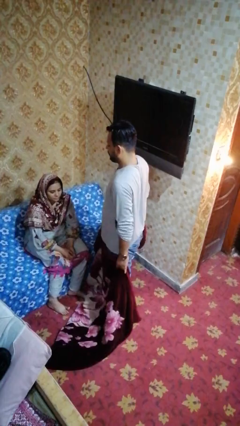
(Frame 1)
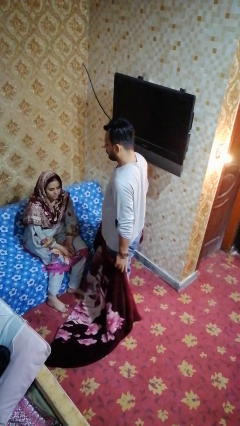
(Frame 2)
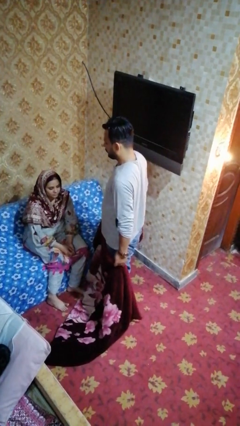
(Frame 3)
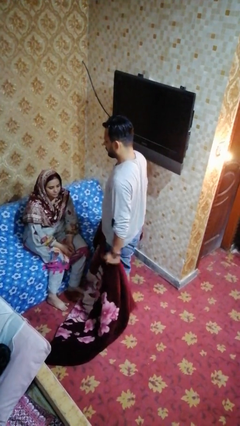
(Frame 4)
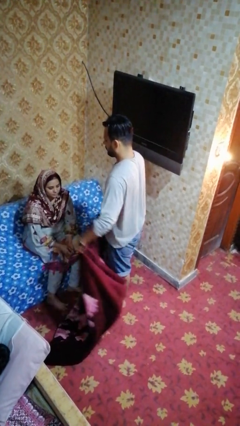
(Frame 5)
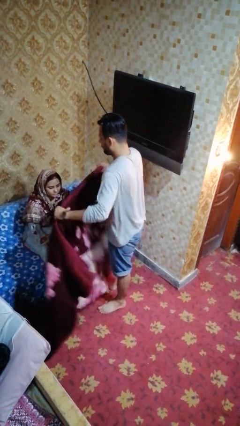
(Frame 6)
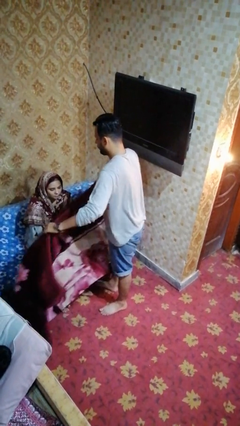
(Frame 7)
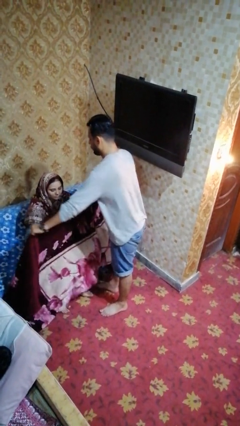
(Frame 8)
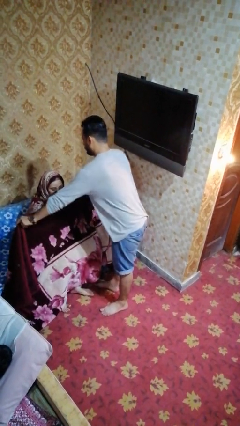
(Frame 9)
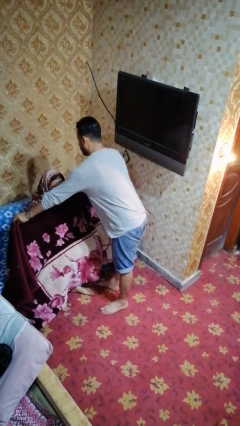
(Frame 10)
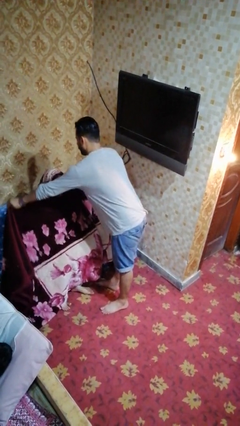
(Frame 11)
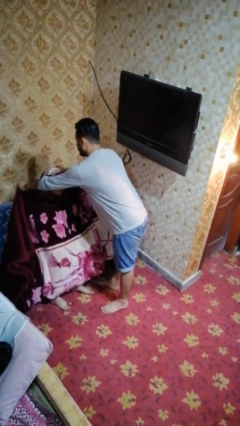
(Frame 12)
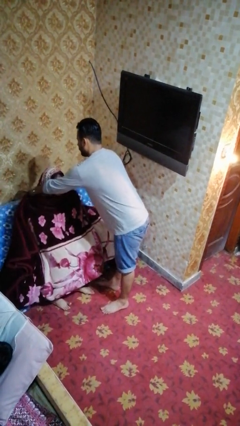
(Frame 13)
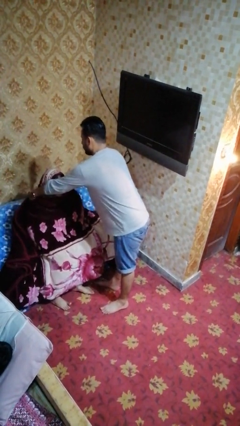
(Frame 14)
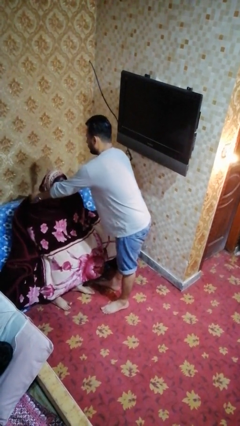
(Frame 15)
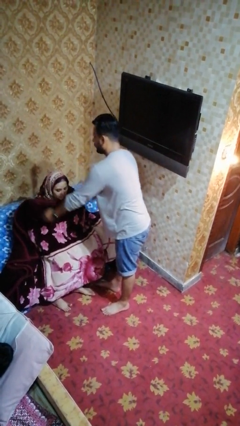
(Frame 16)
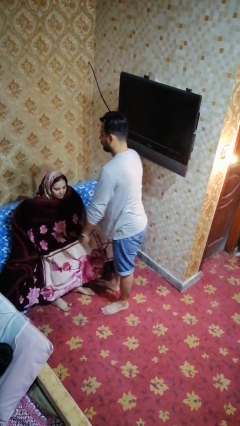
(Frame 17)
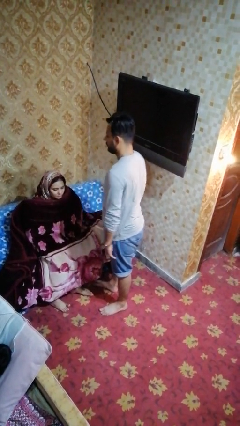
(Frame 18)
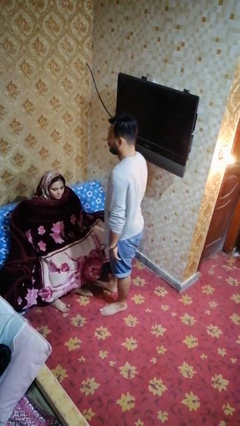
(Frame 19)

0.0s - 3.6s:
person covers friend with blanket

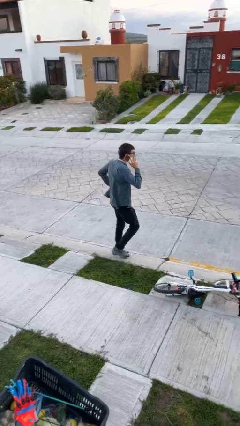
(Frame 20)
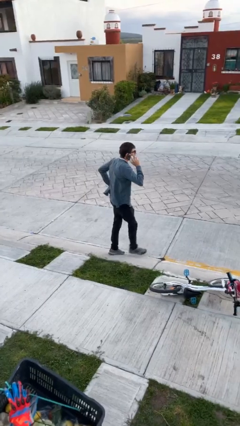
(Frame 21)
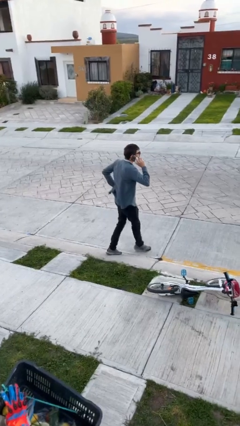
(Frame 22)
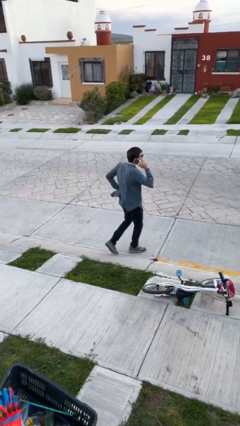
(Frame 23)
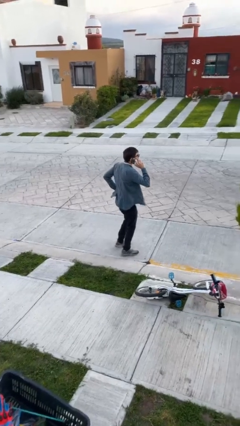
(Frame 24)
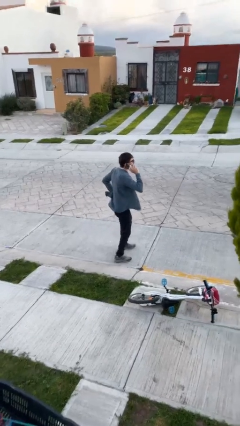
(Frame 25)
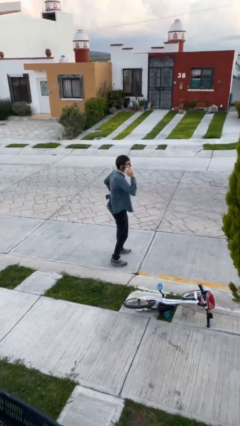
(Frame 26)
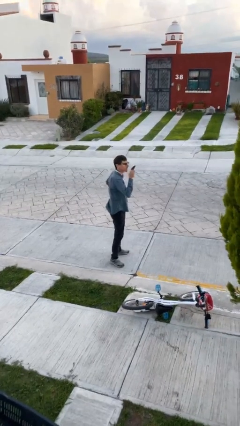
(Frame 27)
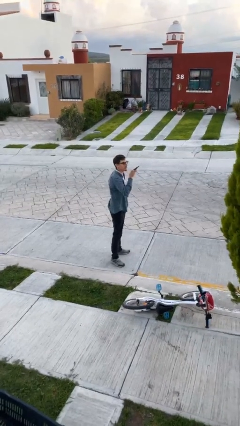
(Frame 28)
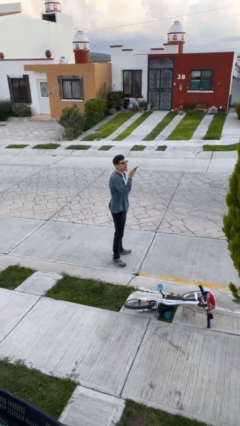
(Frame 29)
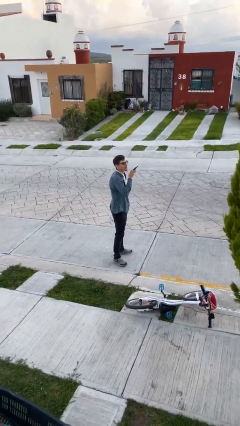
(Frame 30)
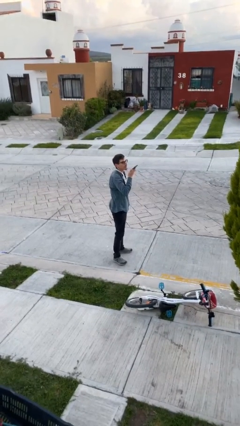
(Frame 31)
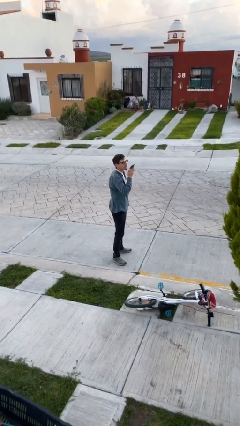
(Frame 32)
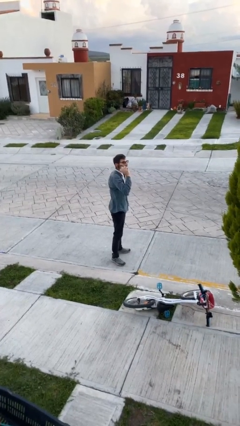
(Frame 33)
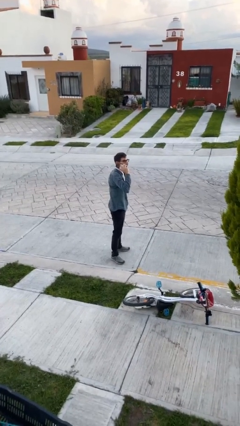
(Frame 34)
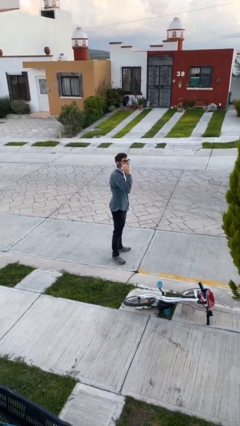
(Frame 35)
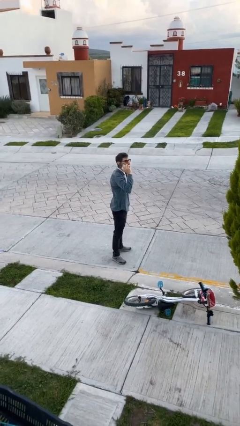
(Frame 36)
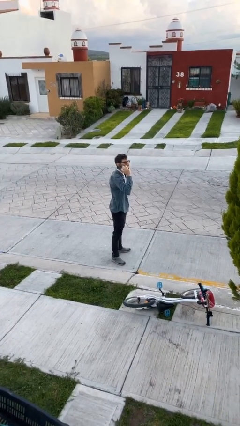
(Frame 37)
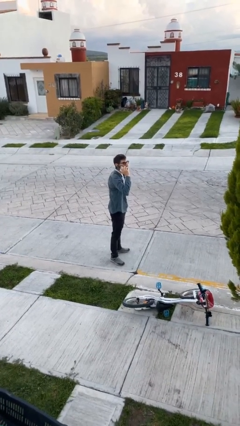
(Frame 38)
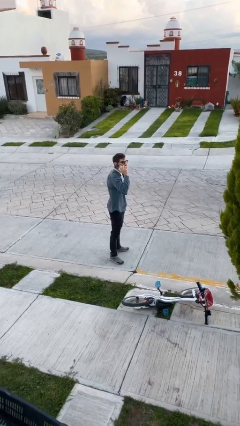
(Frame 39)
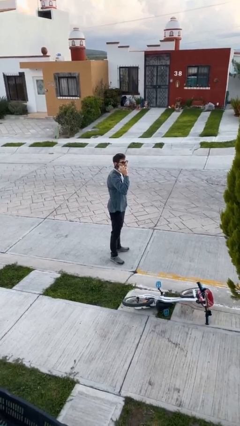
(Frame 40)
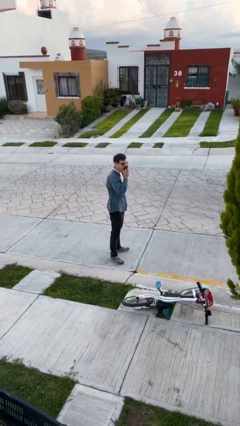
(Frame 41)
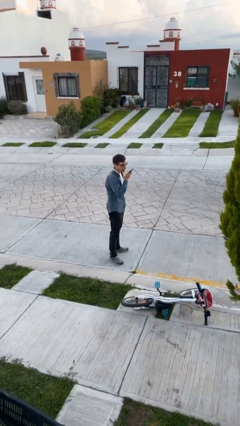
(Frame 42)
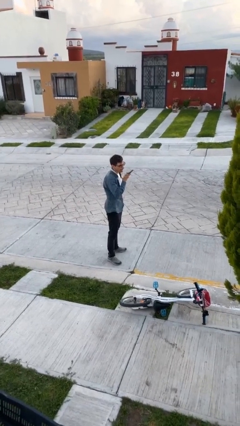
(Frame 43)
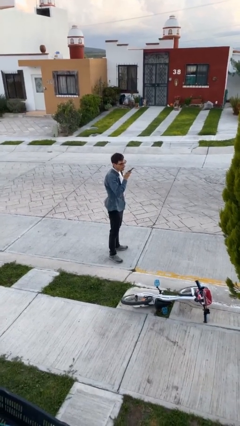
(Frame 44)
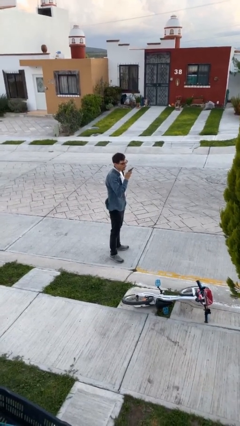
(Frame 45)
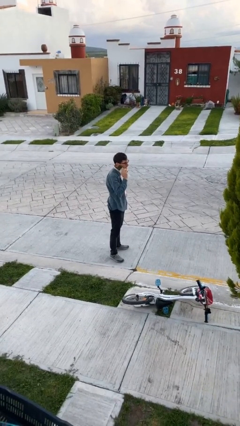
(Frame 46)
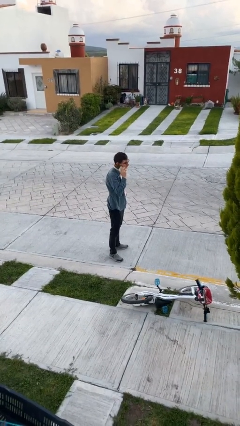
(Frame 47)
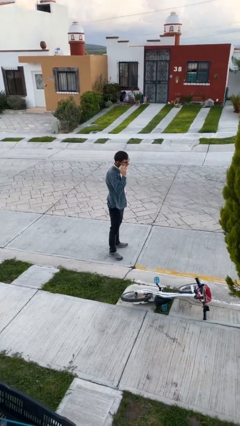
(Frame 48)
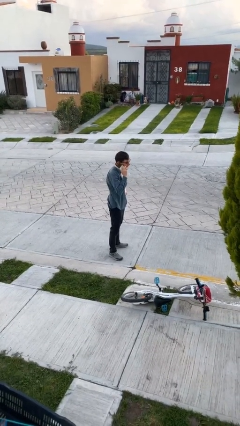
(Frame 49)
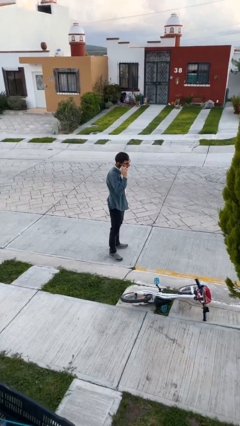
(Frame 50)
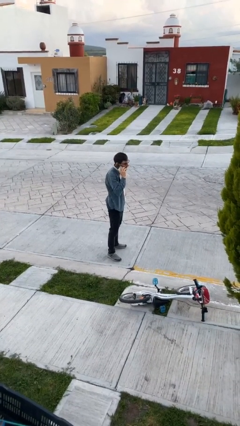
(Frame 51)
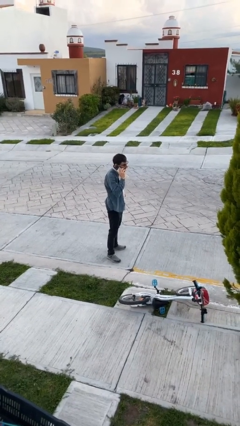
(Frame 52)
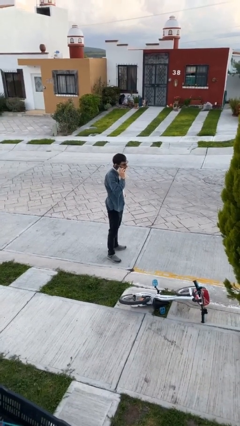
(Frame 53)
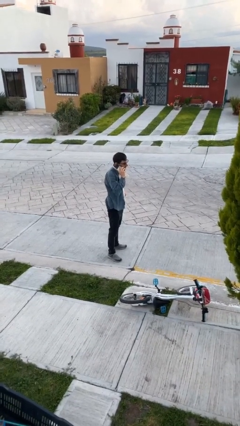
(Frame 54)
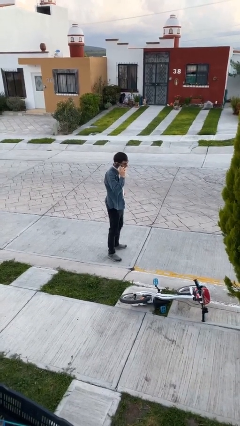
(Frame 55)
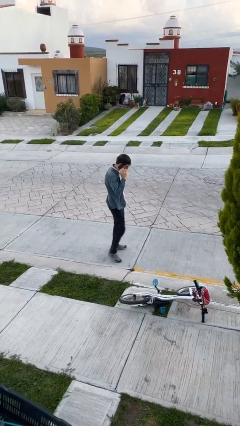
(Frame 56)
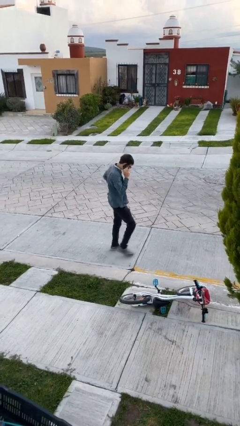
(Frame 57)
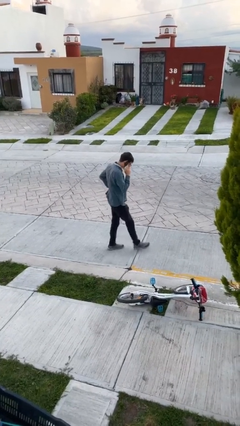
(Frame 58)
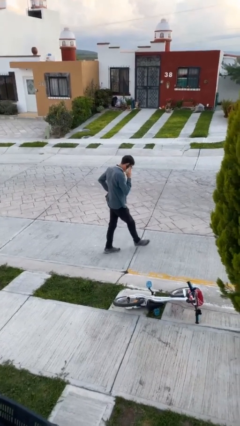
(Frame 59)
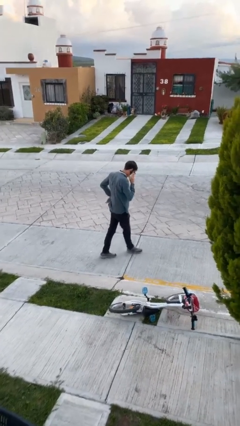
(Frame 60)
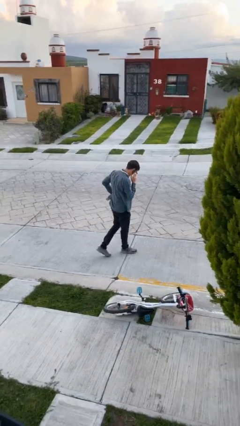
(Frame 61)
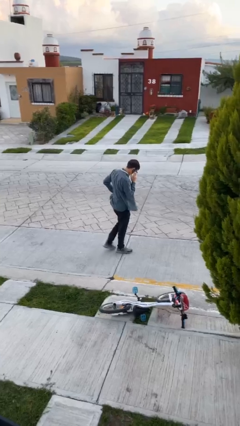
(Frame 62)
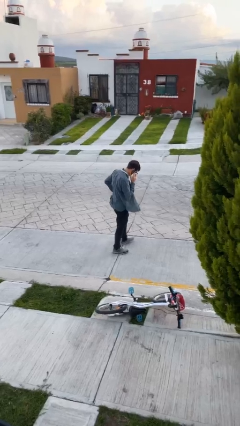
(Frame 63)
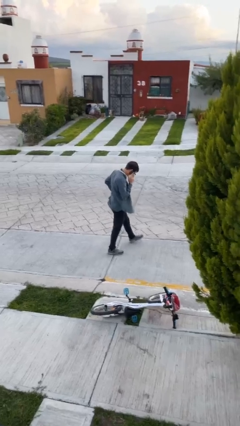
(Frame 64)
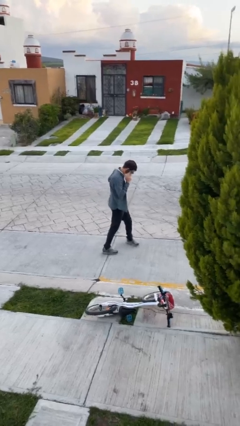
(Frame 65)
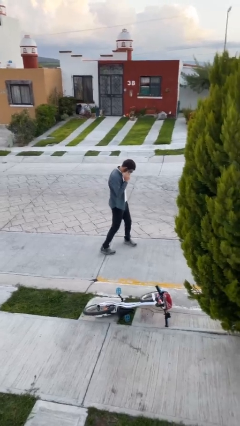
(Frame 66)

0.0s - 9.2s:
person talks on phone

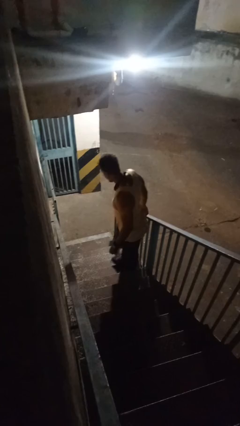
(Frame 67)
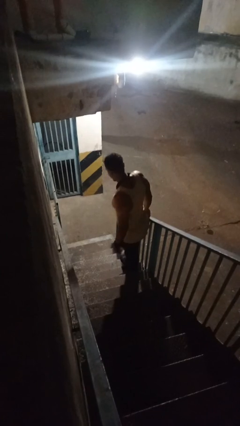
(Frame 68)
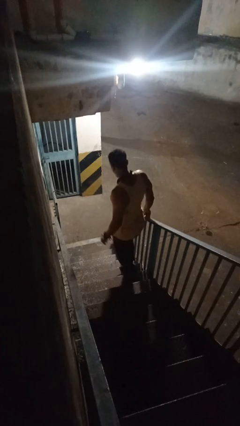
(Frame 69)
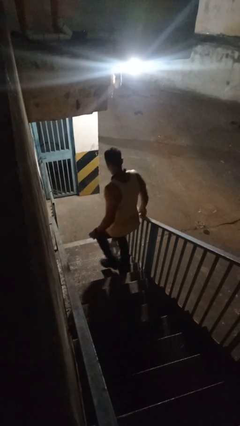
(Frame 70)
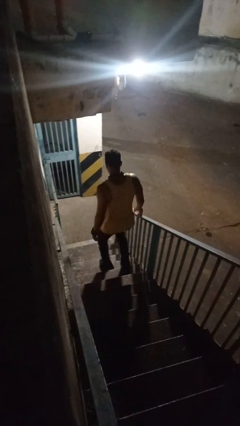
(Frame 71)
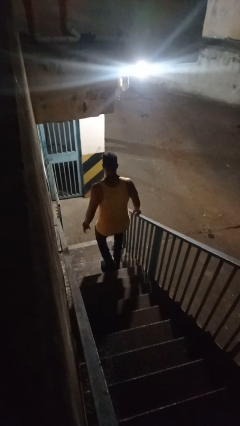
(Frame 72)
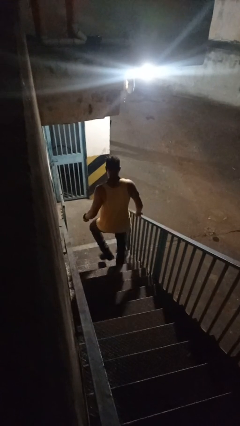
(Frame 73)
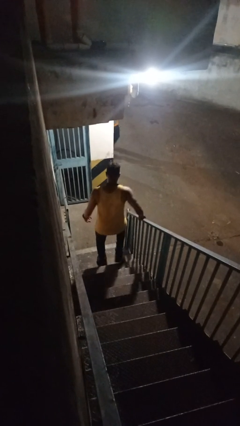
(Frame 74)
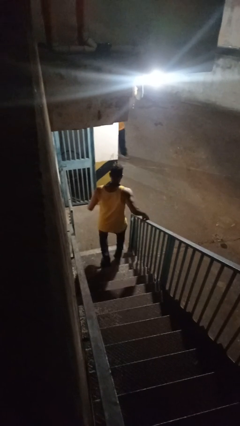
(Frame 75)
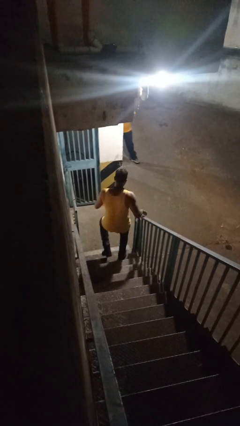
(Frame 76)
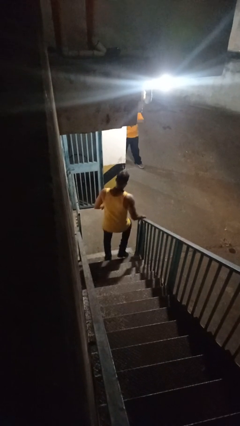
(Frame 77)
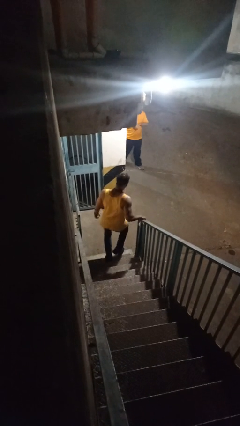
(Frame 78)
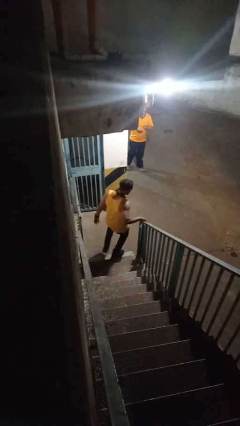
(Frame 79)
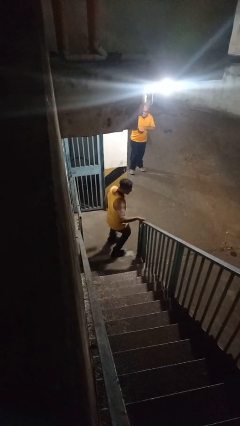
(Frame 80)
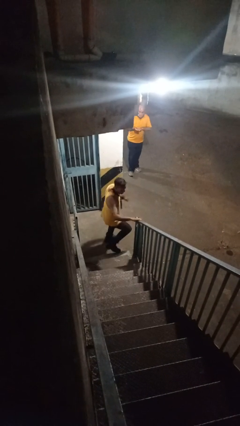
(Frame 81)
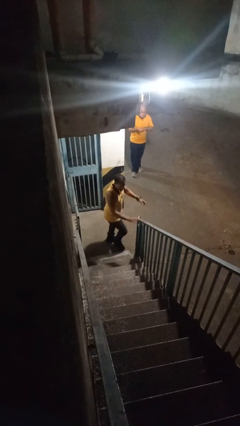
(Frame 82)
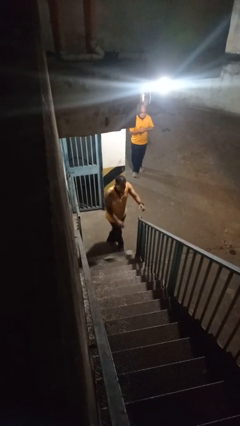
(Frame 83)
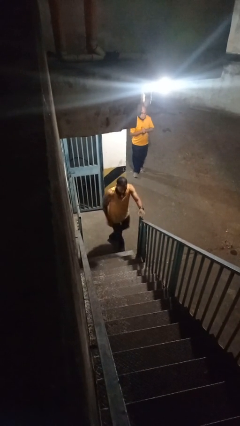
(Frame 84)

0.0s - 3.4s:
person climbs down stairs

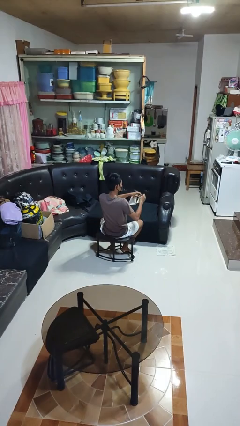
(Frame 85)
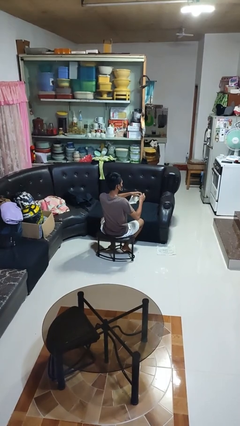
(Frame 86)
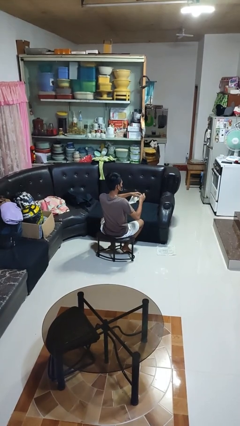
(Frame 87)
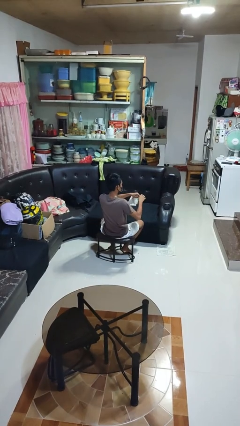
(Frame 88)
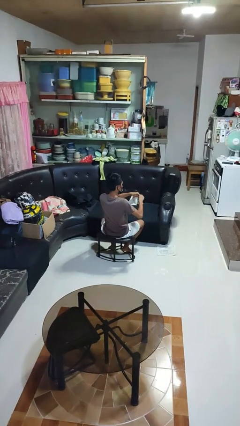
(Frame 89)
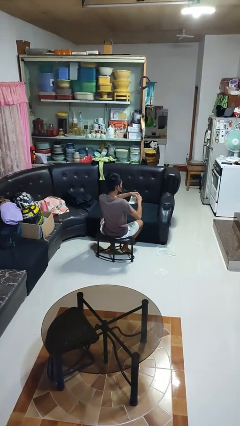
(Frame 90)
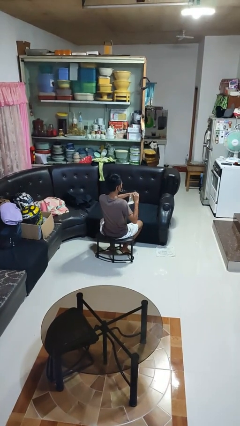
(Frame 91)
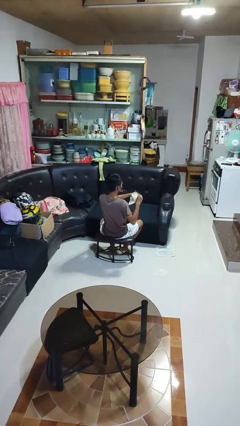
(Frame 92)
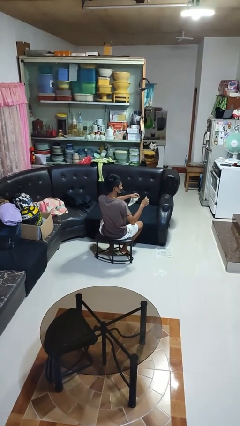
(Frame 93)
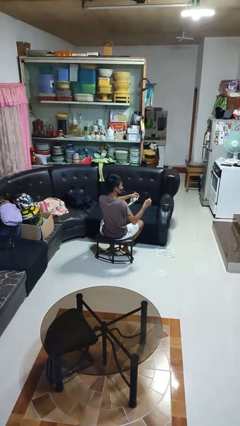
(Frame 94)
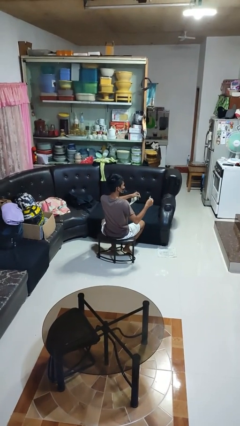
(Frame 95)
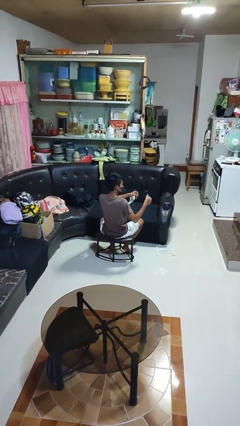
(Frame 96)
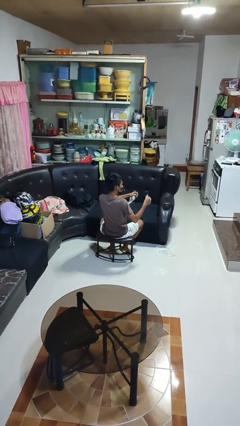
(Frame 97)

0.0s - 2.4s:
person tears paper
